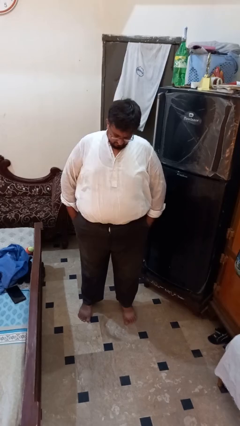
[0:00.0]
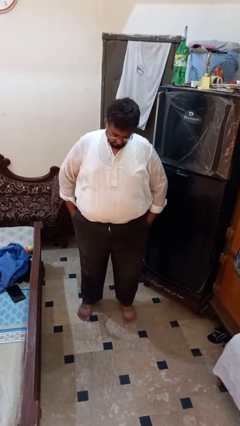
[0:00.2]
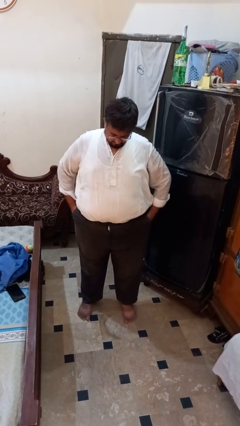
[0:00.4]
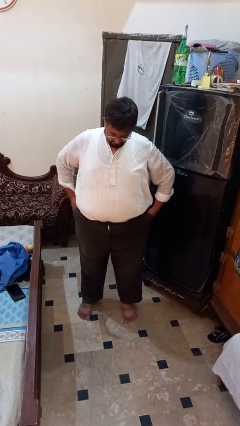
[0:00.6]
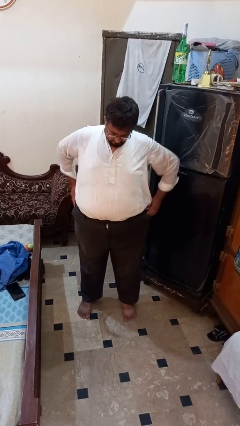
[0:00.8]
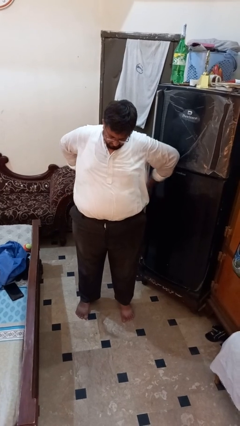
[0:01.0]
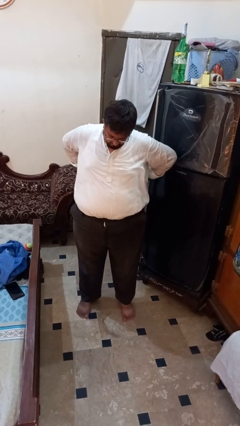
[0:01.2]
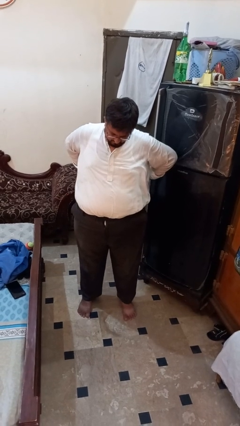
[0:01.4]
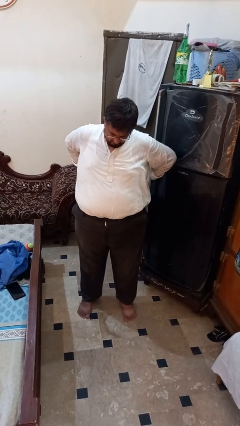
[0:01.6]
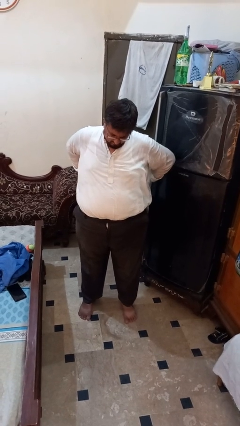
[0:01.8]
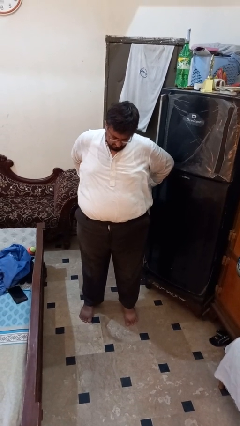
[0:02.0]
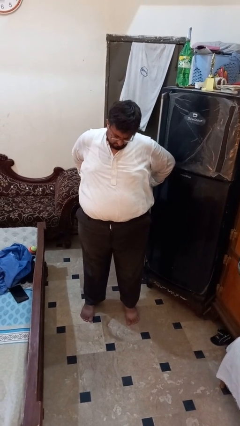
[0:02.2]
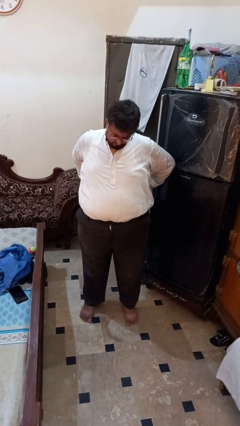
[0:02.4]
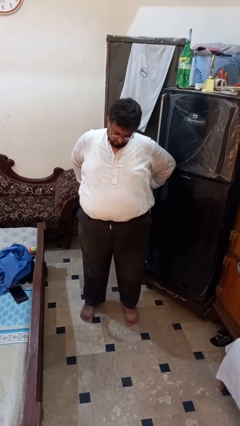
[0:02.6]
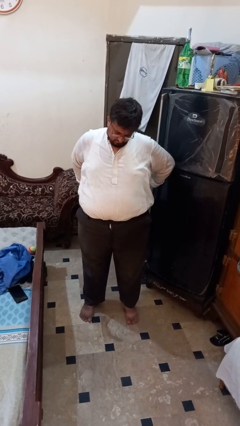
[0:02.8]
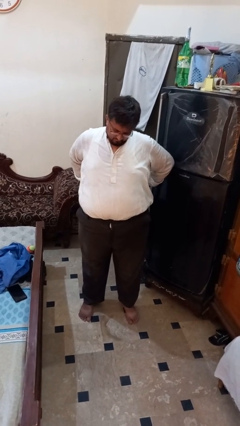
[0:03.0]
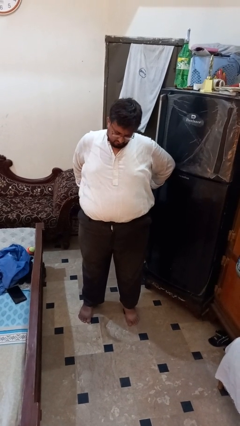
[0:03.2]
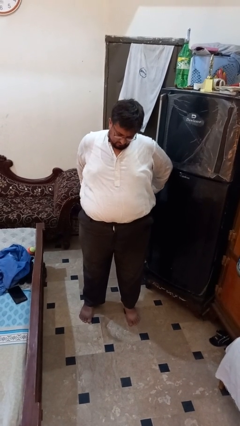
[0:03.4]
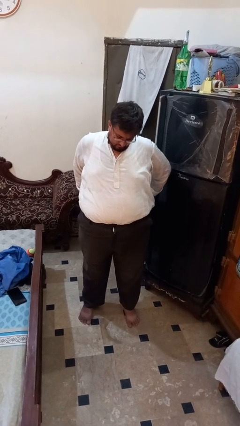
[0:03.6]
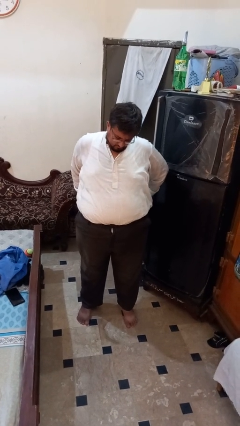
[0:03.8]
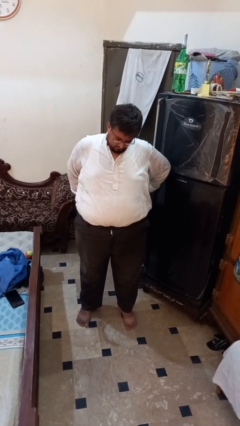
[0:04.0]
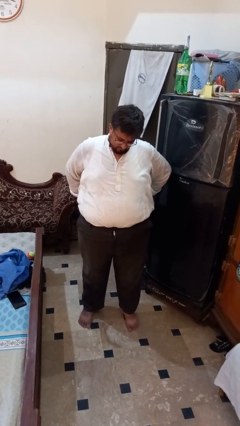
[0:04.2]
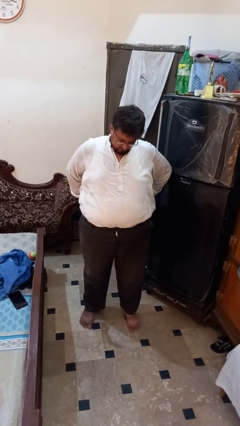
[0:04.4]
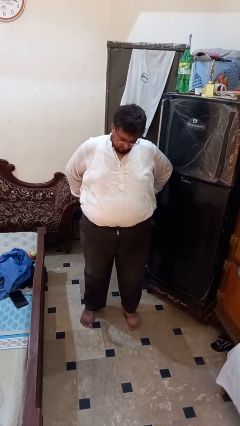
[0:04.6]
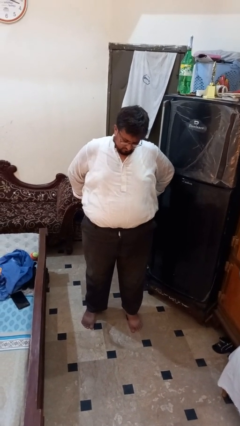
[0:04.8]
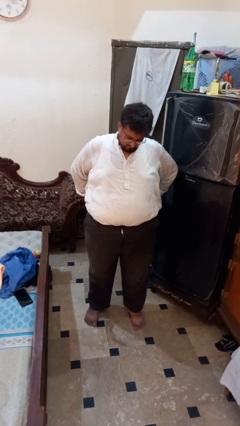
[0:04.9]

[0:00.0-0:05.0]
person puts hands in back pockets

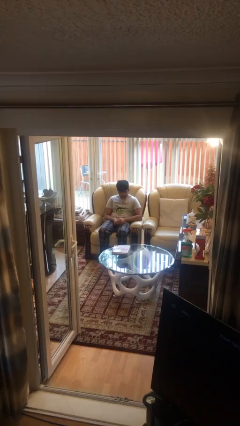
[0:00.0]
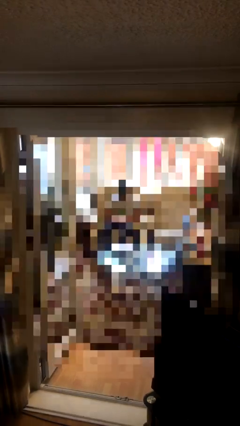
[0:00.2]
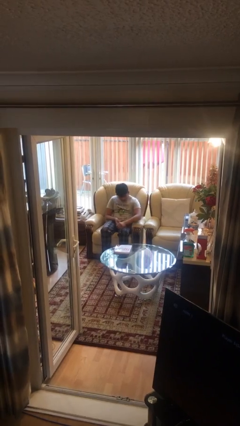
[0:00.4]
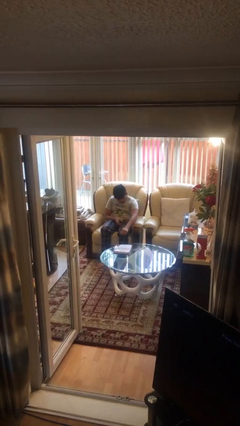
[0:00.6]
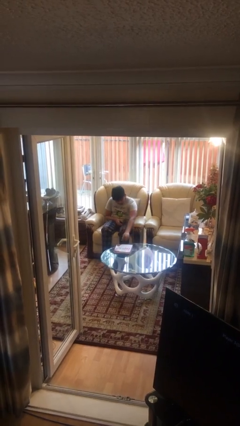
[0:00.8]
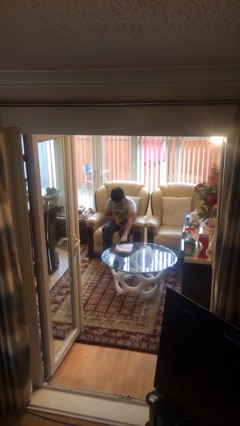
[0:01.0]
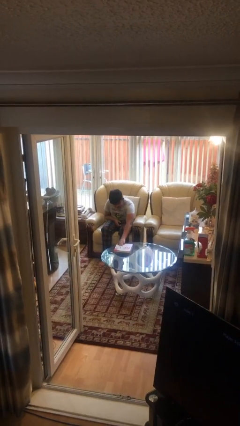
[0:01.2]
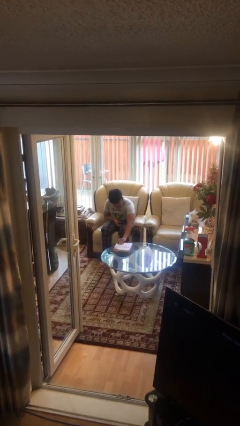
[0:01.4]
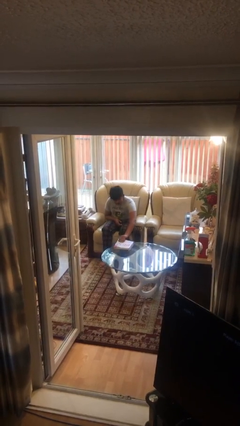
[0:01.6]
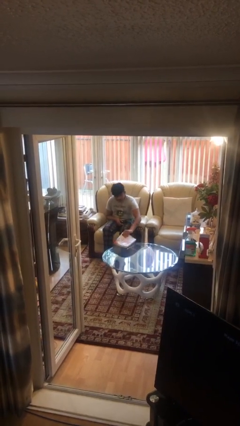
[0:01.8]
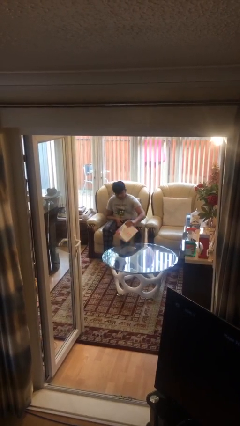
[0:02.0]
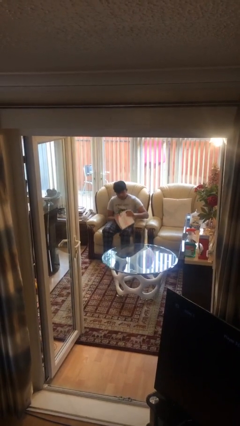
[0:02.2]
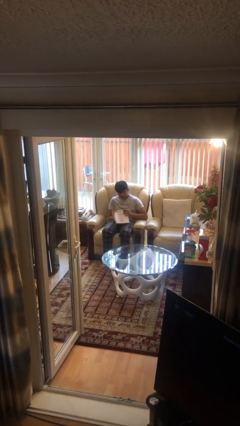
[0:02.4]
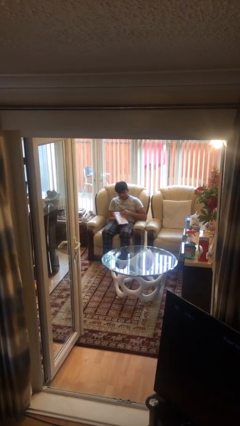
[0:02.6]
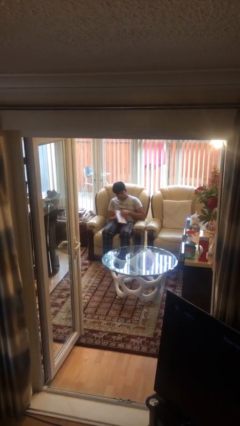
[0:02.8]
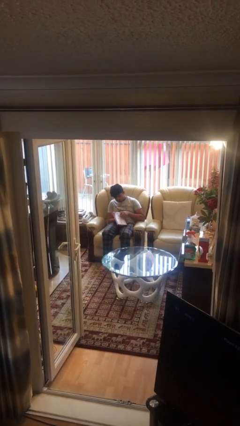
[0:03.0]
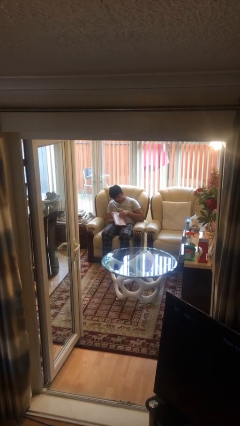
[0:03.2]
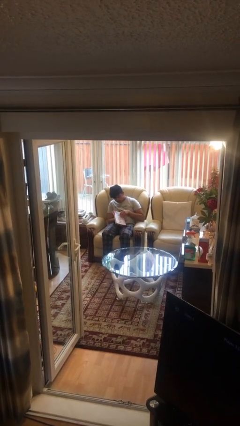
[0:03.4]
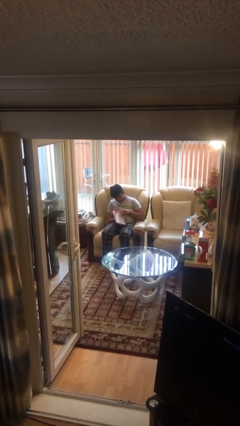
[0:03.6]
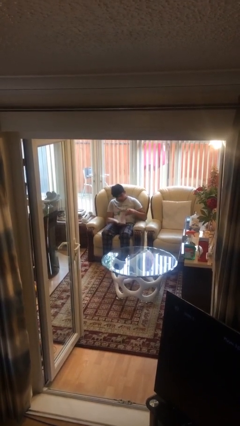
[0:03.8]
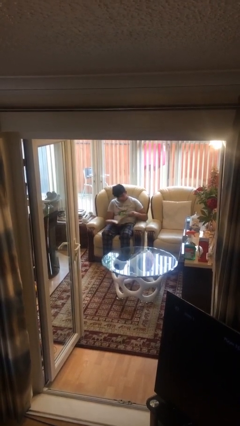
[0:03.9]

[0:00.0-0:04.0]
person picks up object from table

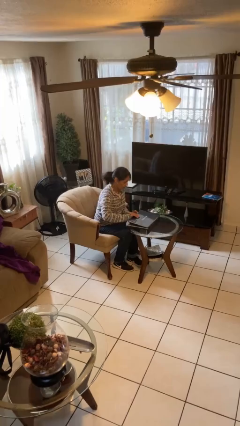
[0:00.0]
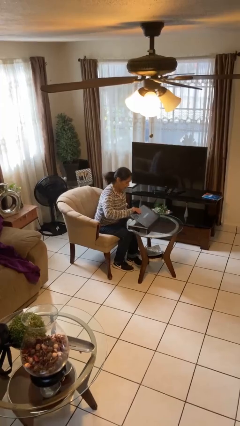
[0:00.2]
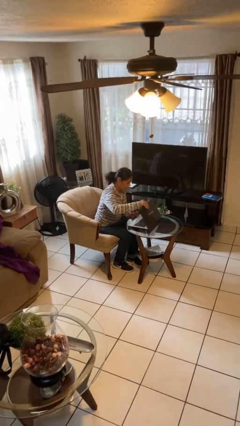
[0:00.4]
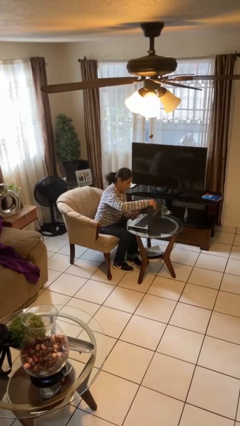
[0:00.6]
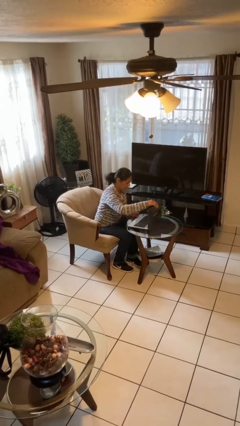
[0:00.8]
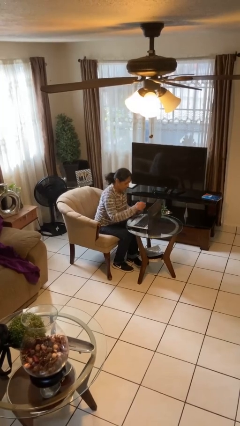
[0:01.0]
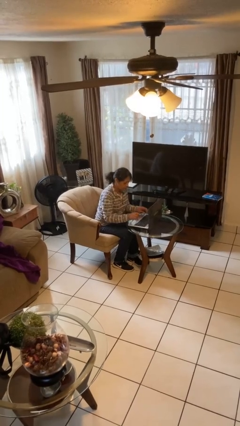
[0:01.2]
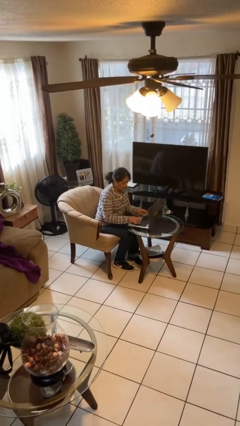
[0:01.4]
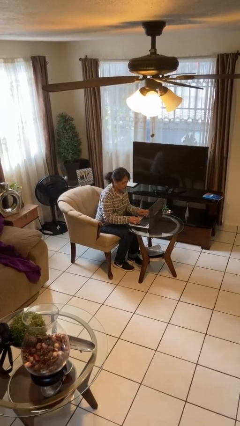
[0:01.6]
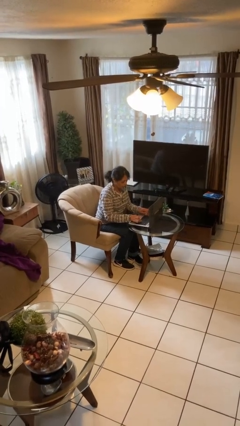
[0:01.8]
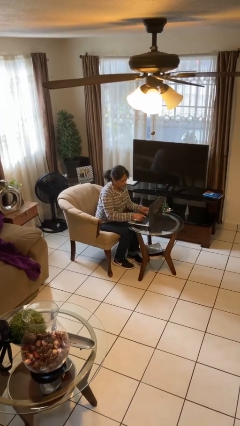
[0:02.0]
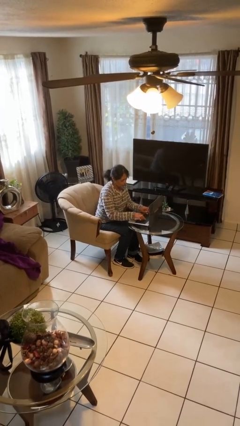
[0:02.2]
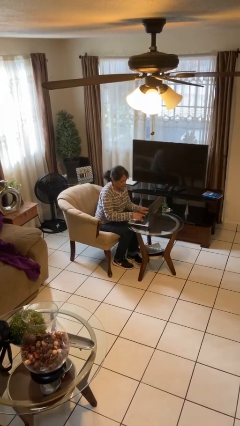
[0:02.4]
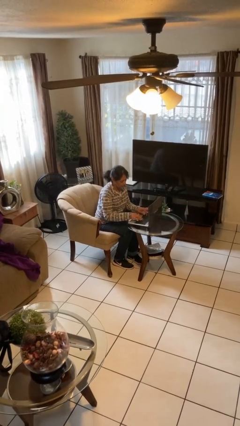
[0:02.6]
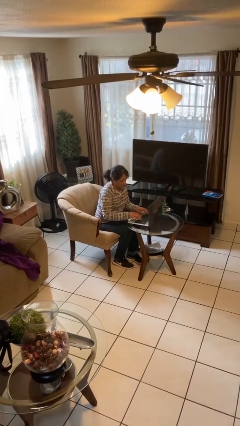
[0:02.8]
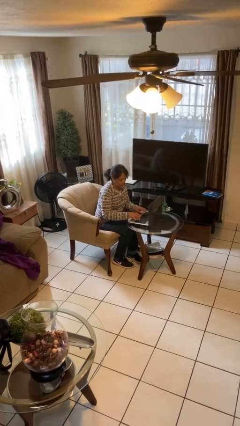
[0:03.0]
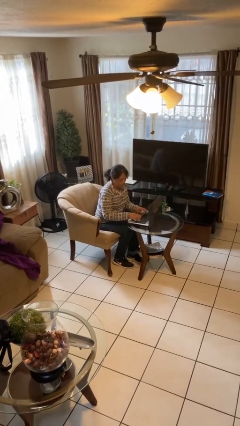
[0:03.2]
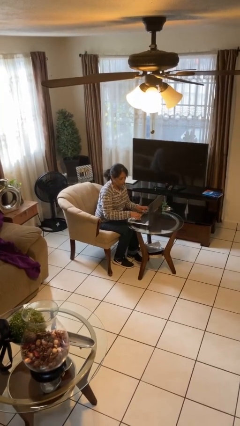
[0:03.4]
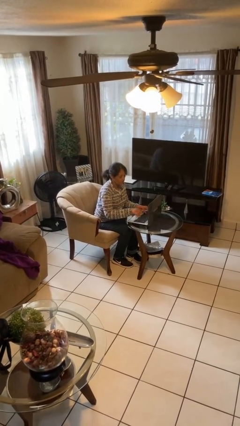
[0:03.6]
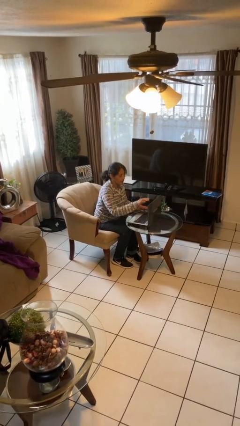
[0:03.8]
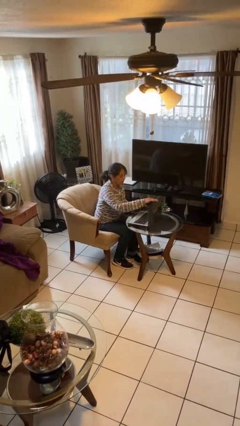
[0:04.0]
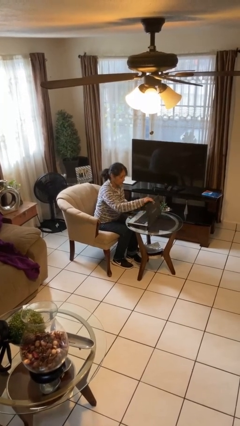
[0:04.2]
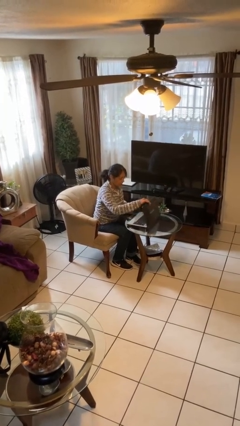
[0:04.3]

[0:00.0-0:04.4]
person interacts with laptop

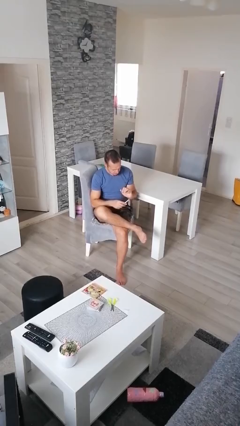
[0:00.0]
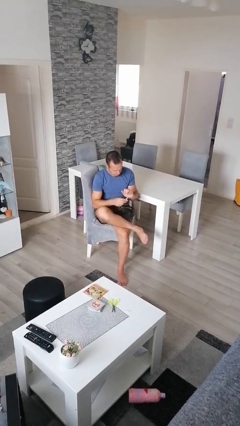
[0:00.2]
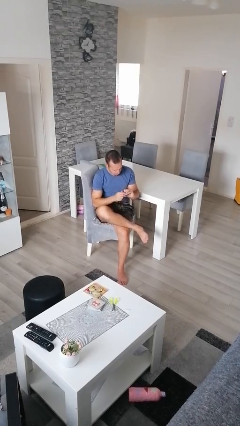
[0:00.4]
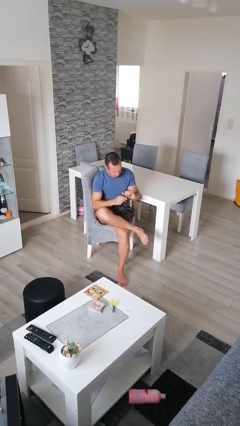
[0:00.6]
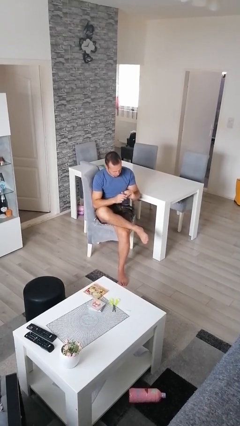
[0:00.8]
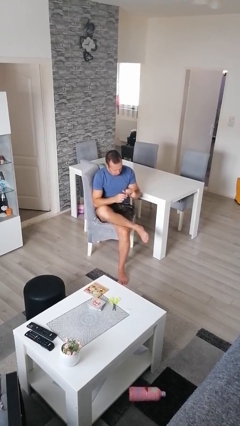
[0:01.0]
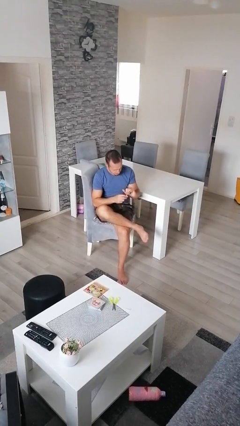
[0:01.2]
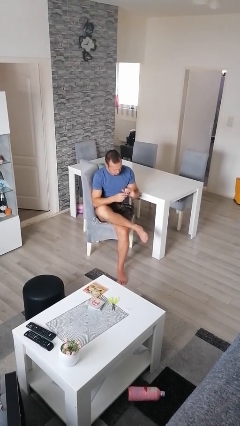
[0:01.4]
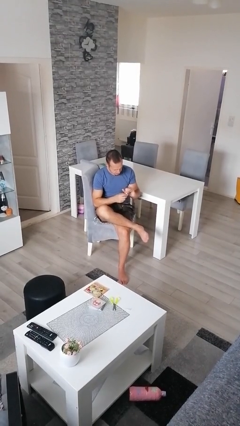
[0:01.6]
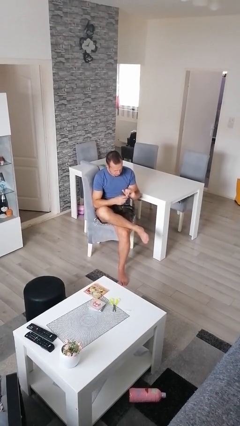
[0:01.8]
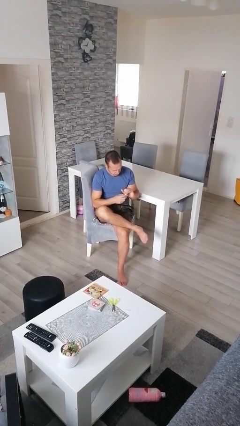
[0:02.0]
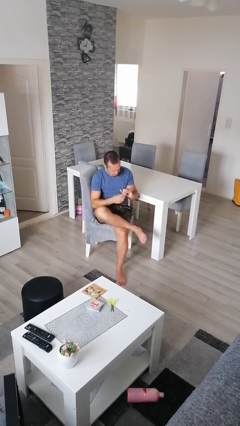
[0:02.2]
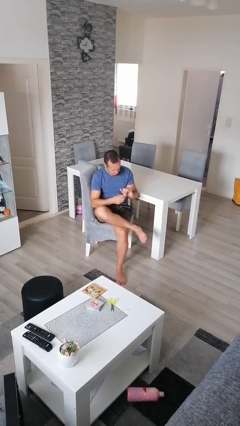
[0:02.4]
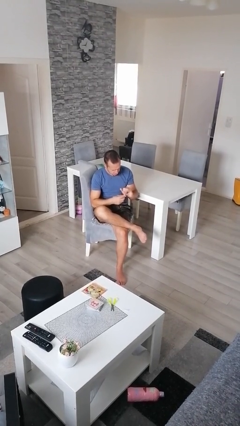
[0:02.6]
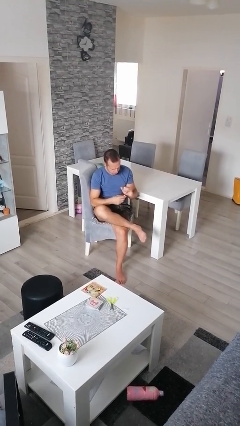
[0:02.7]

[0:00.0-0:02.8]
person files fingernails

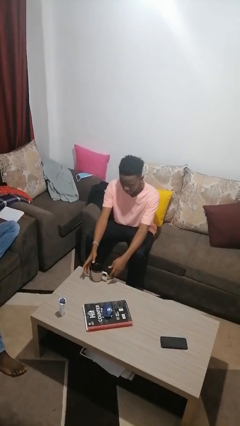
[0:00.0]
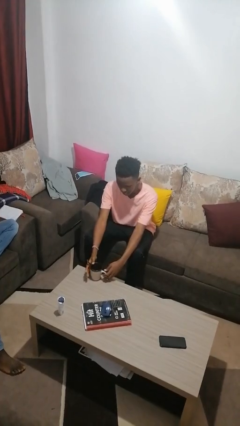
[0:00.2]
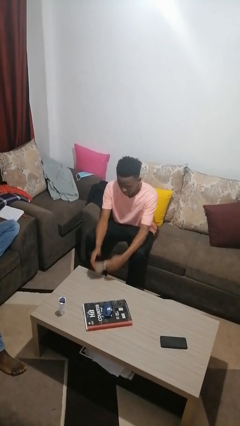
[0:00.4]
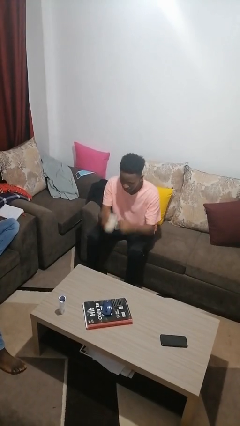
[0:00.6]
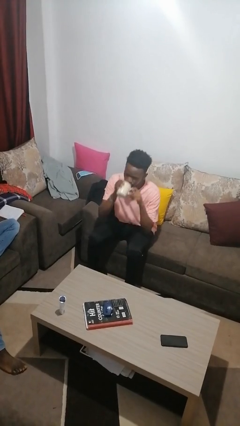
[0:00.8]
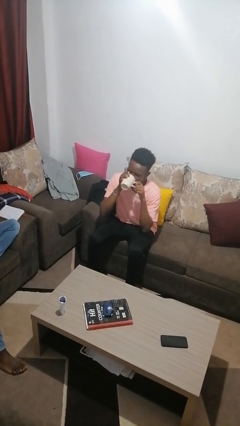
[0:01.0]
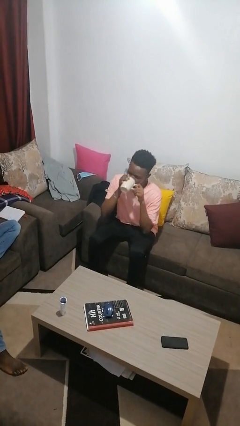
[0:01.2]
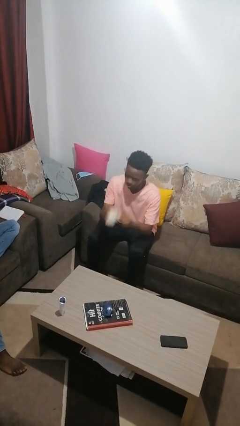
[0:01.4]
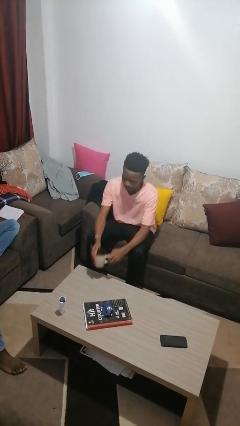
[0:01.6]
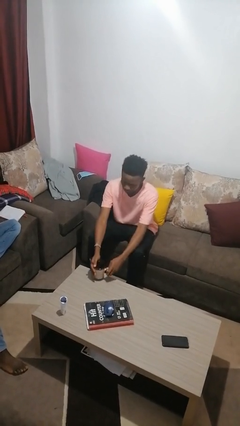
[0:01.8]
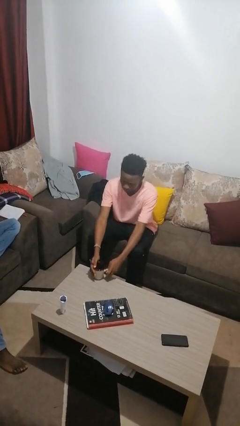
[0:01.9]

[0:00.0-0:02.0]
person drinks from mug
